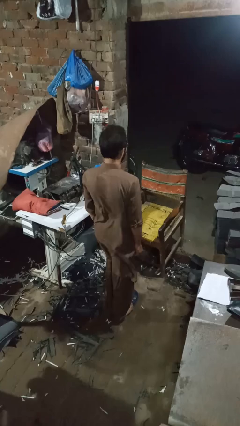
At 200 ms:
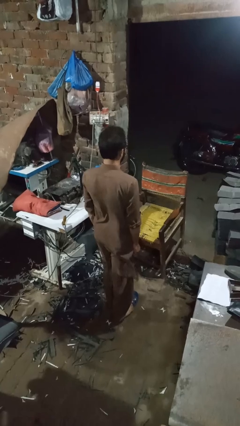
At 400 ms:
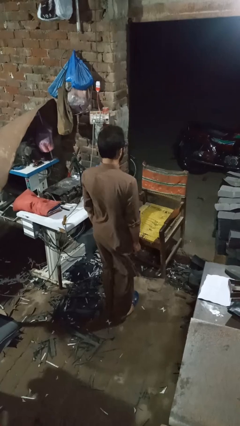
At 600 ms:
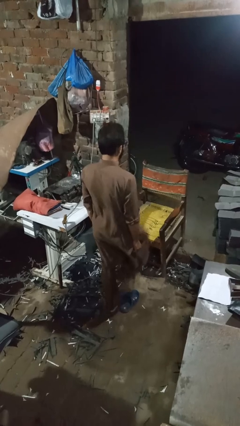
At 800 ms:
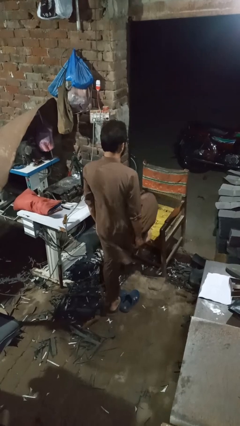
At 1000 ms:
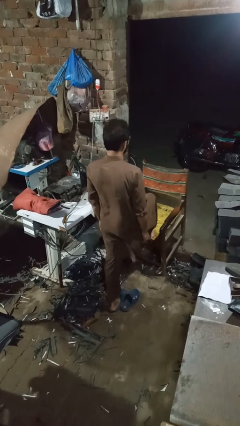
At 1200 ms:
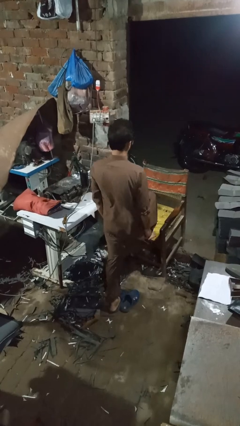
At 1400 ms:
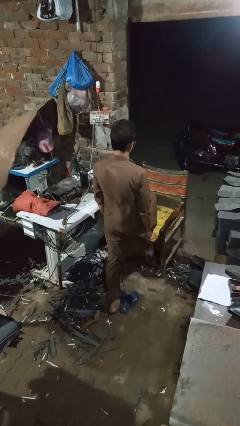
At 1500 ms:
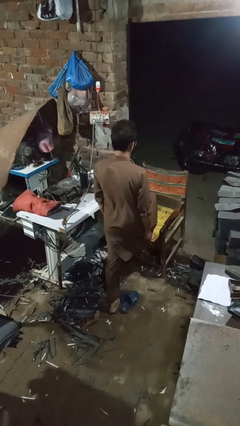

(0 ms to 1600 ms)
person stubs toe

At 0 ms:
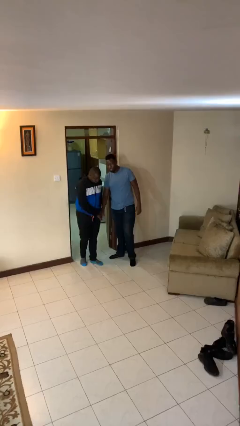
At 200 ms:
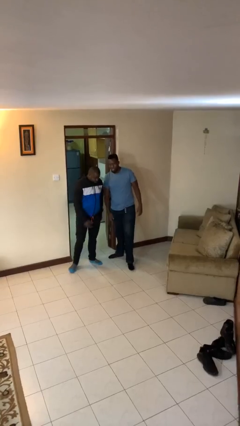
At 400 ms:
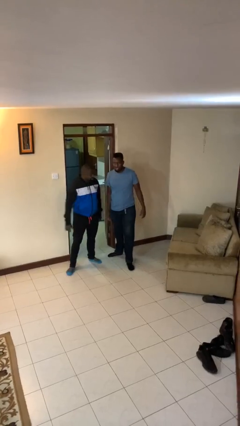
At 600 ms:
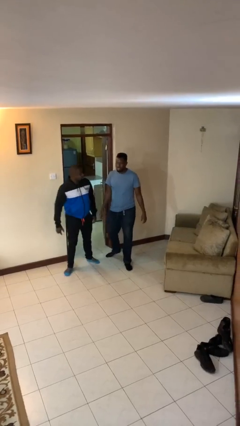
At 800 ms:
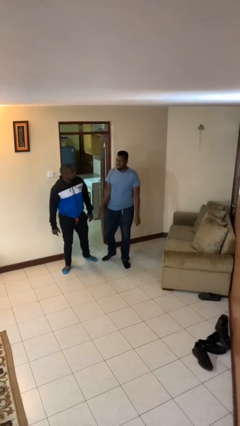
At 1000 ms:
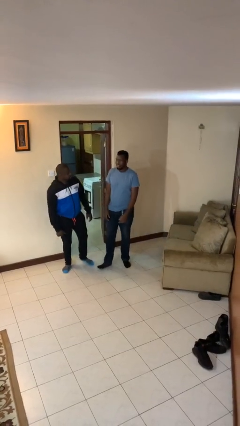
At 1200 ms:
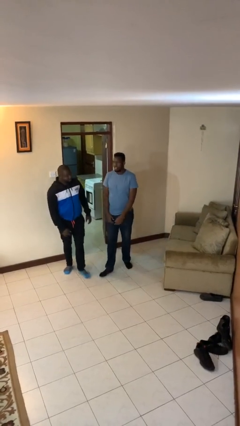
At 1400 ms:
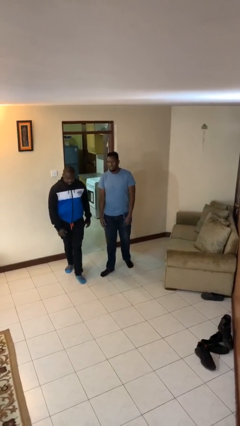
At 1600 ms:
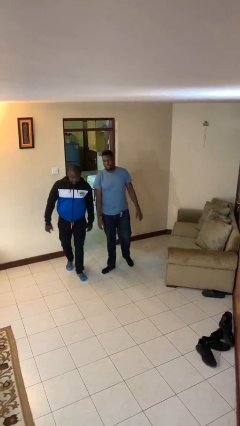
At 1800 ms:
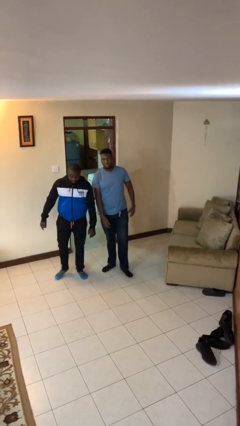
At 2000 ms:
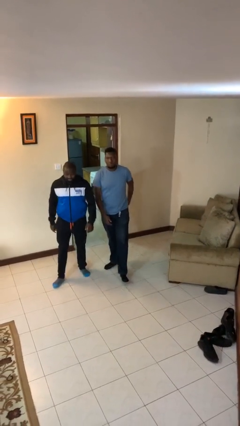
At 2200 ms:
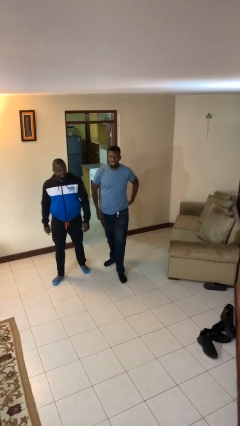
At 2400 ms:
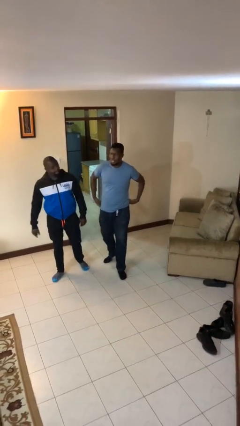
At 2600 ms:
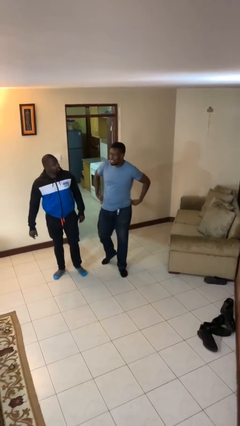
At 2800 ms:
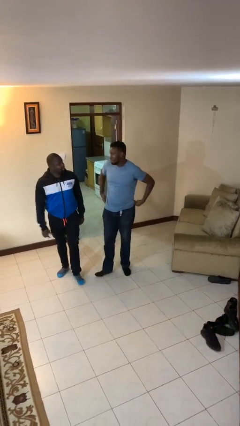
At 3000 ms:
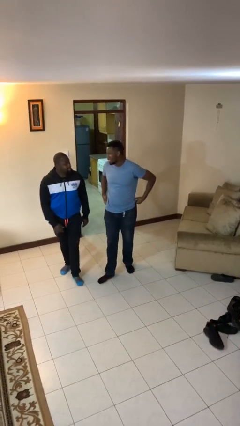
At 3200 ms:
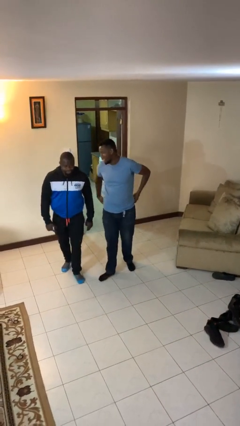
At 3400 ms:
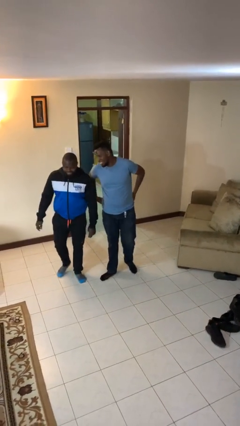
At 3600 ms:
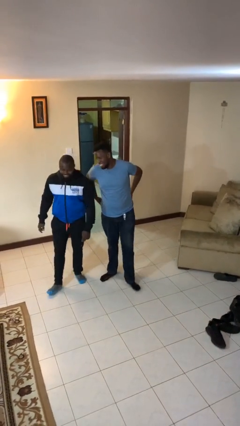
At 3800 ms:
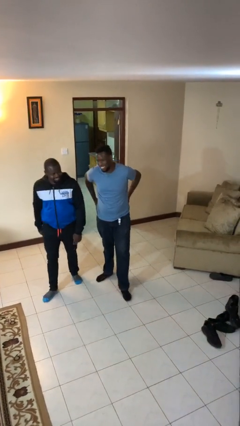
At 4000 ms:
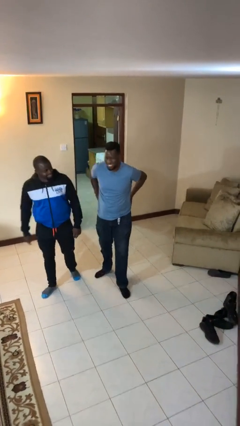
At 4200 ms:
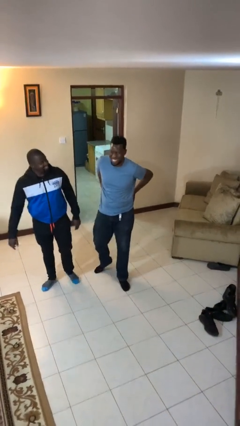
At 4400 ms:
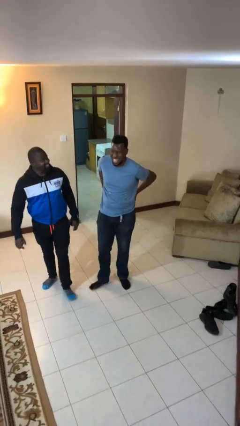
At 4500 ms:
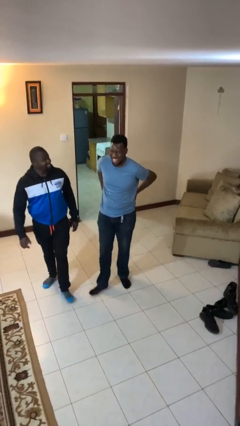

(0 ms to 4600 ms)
person talks to person

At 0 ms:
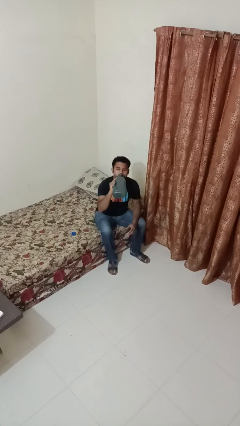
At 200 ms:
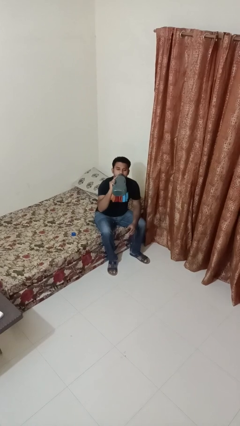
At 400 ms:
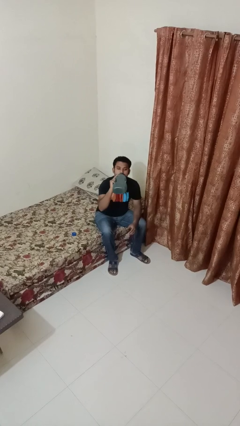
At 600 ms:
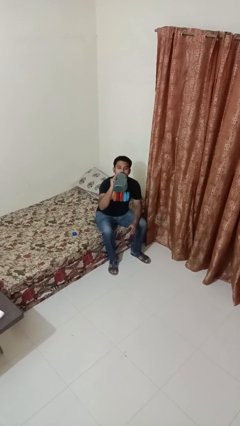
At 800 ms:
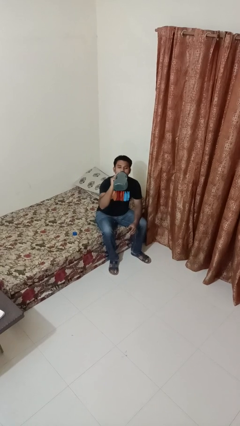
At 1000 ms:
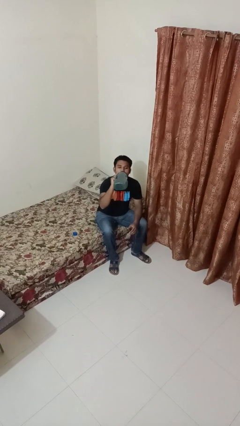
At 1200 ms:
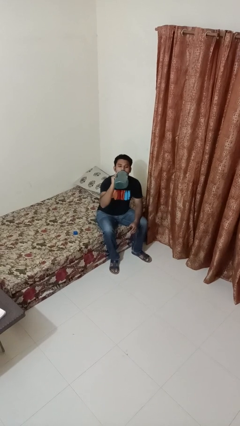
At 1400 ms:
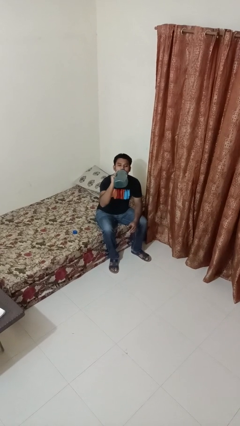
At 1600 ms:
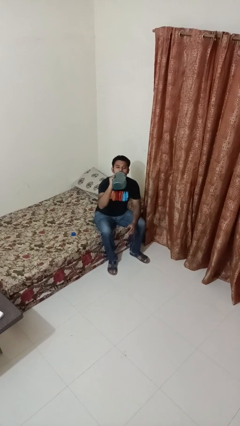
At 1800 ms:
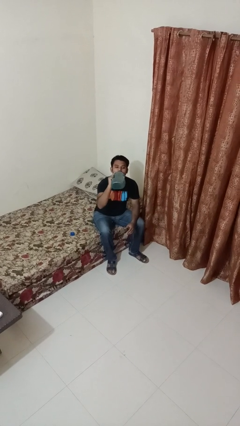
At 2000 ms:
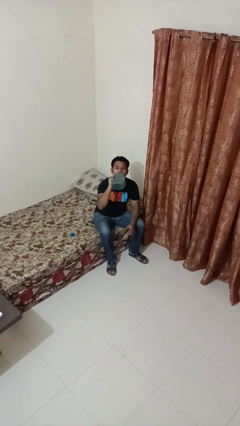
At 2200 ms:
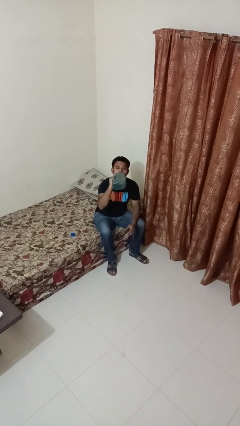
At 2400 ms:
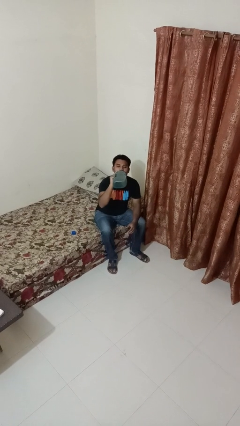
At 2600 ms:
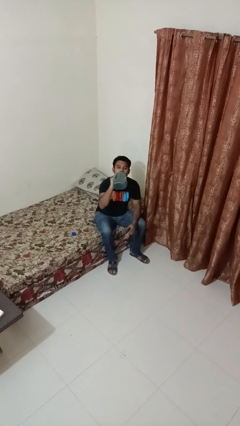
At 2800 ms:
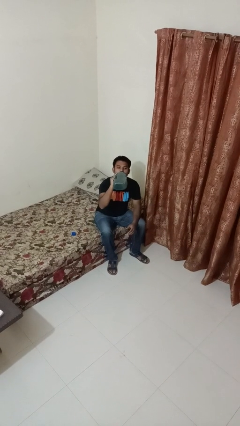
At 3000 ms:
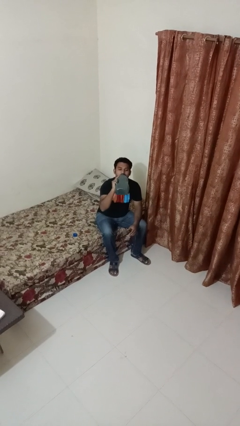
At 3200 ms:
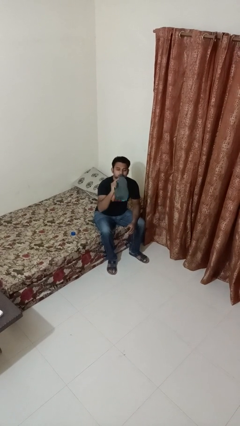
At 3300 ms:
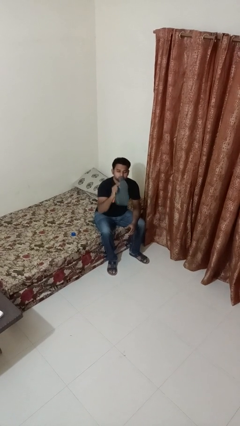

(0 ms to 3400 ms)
person drinks from bottle

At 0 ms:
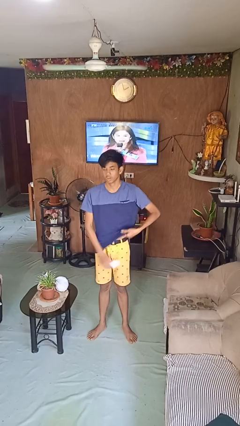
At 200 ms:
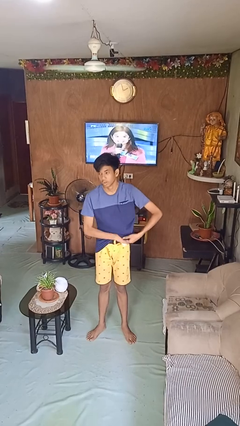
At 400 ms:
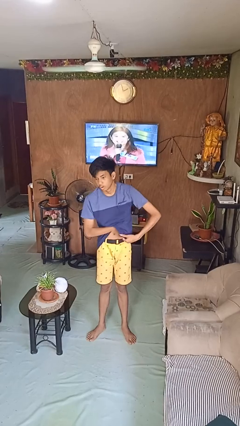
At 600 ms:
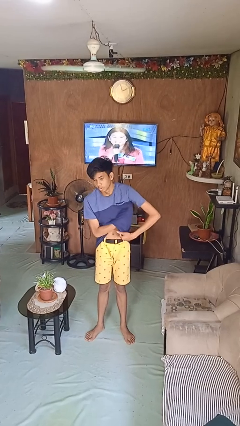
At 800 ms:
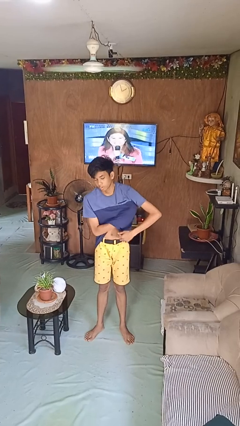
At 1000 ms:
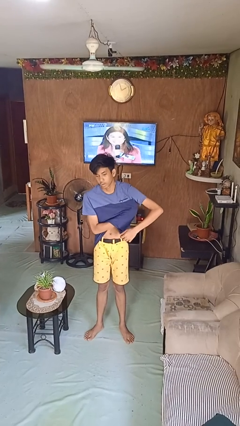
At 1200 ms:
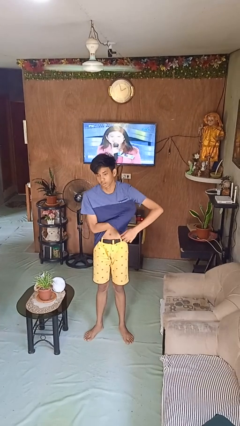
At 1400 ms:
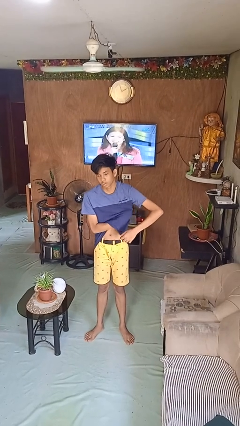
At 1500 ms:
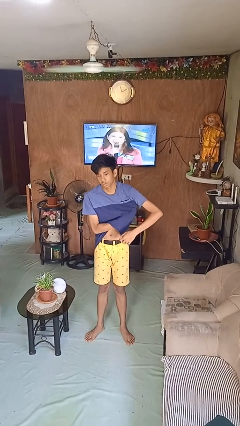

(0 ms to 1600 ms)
person applies deodorant

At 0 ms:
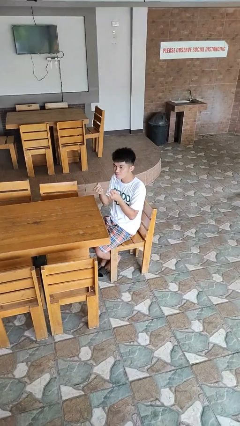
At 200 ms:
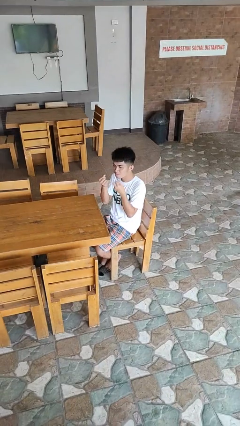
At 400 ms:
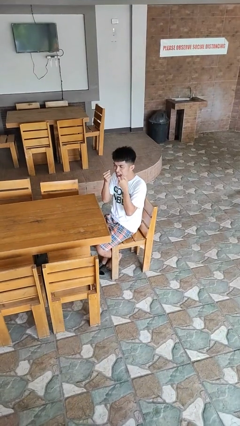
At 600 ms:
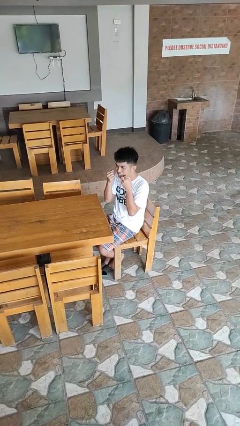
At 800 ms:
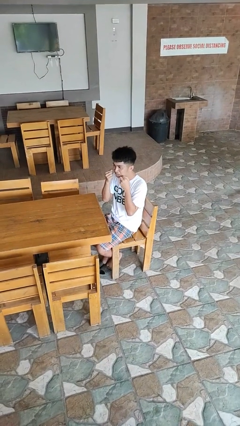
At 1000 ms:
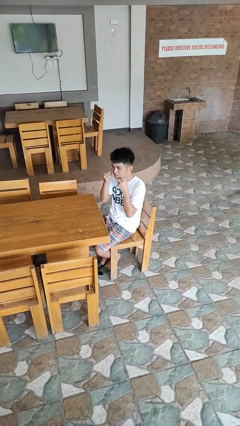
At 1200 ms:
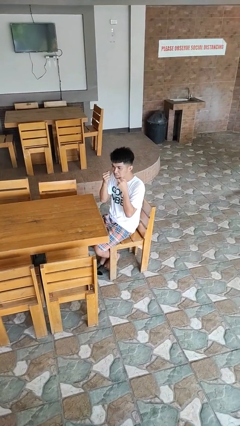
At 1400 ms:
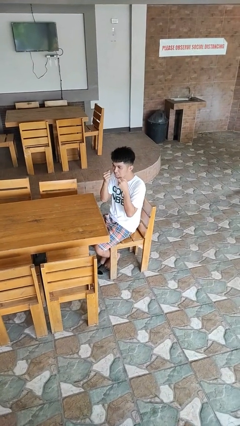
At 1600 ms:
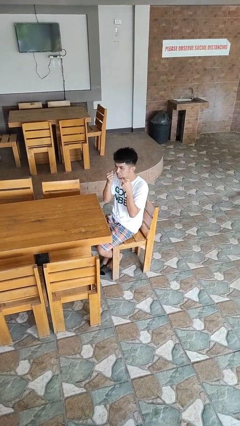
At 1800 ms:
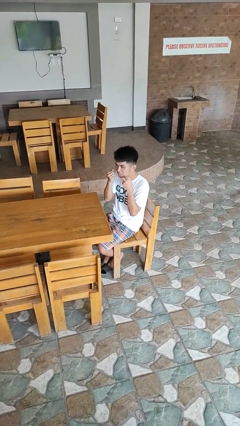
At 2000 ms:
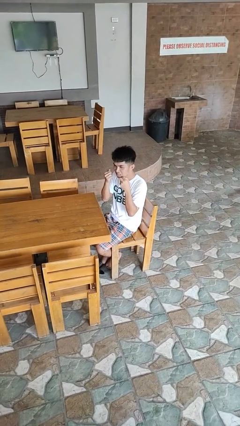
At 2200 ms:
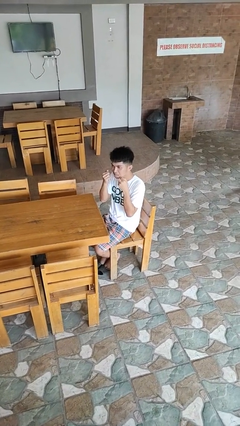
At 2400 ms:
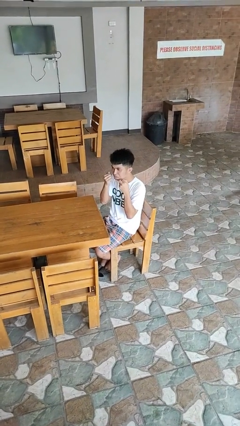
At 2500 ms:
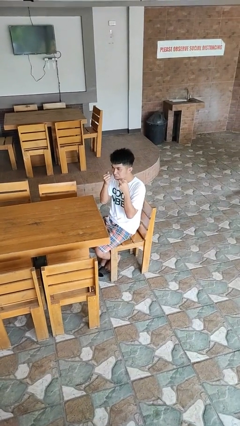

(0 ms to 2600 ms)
person flosses

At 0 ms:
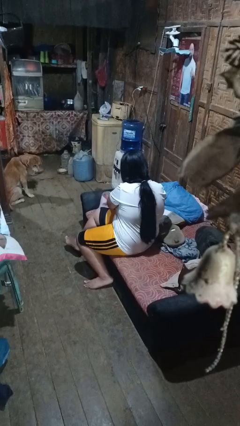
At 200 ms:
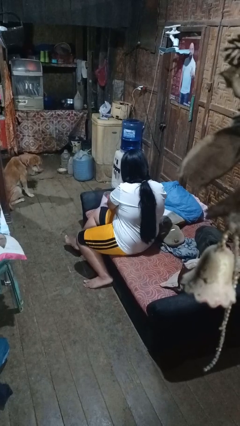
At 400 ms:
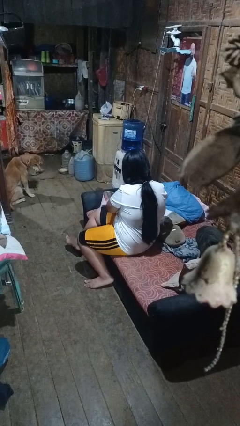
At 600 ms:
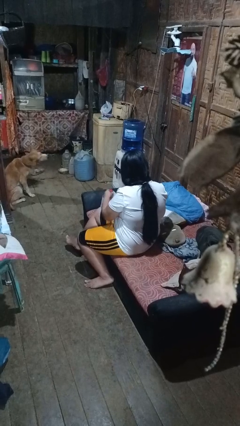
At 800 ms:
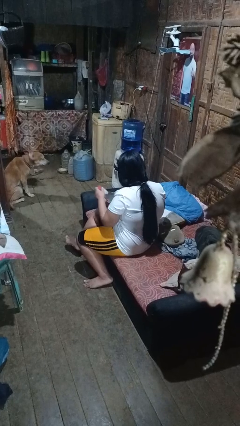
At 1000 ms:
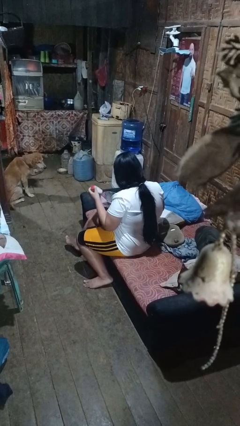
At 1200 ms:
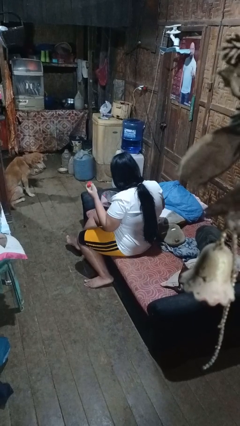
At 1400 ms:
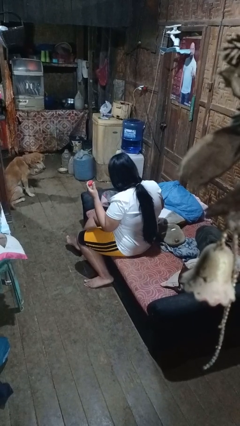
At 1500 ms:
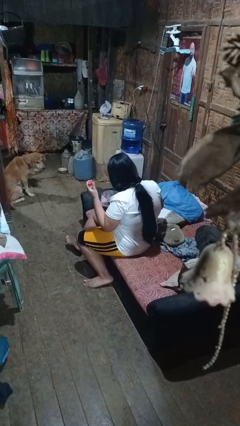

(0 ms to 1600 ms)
person searches in bag

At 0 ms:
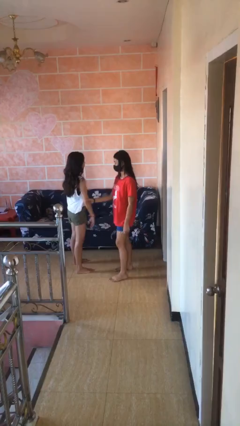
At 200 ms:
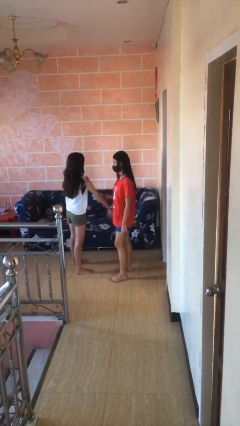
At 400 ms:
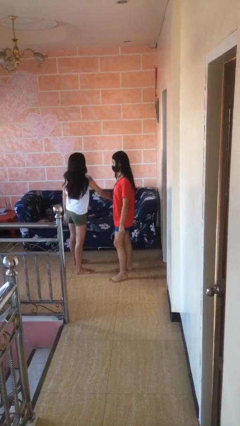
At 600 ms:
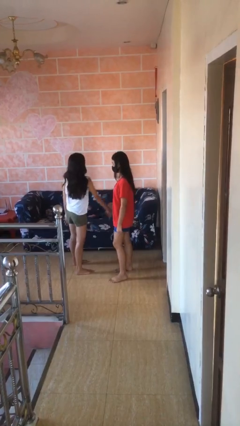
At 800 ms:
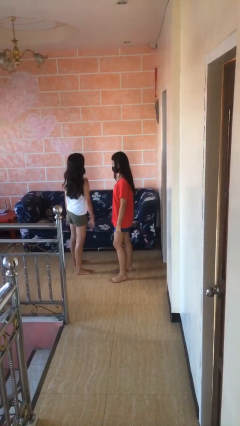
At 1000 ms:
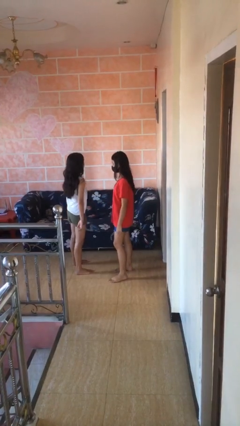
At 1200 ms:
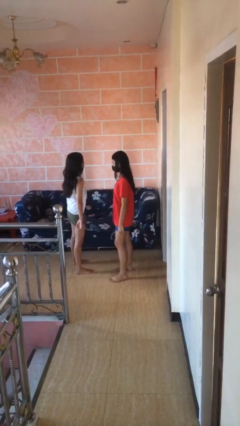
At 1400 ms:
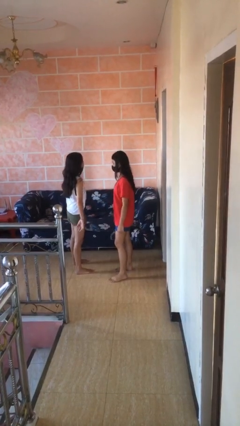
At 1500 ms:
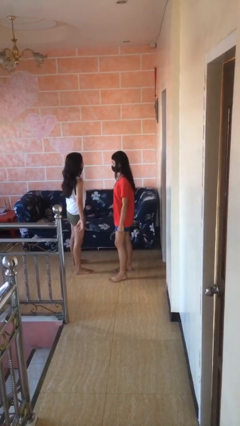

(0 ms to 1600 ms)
person grabs person by forearm

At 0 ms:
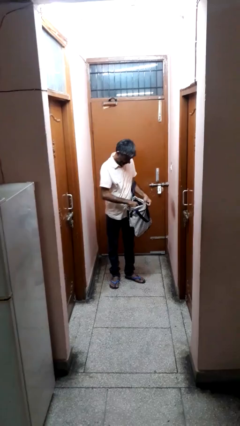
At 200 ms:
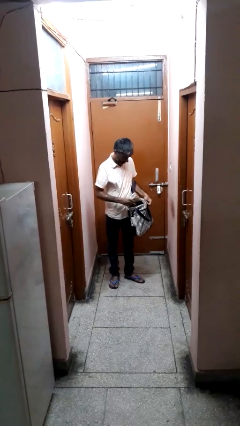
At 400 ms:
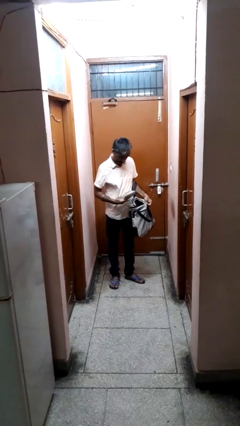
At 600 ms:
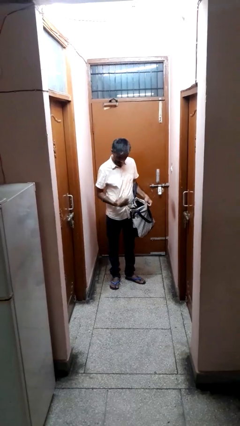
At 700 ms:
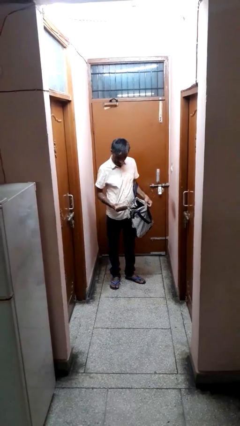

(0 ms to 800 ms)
person takes object from bag
